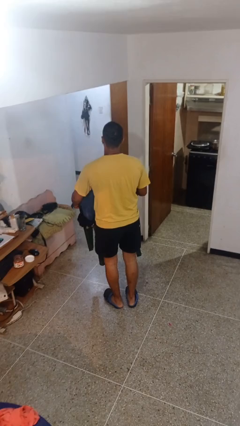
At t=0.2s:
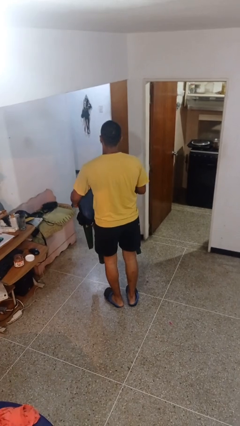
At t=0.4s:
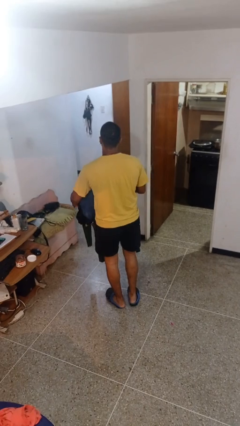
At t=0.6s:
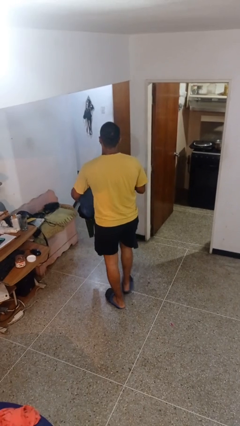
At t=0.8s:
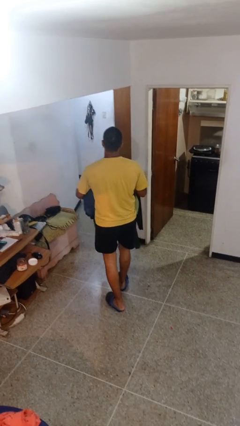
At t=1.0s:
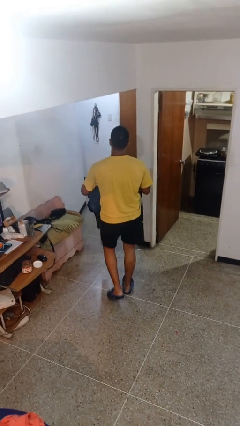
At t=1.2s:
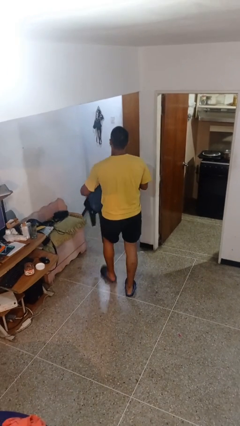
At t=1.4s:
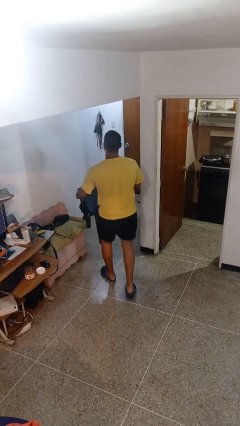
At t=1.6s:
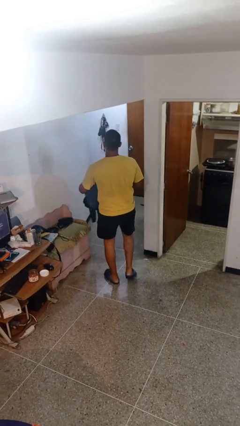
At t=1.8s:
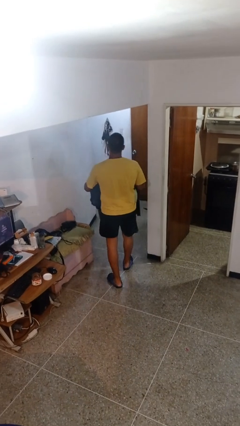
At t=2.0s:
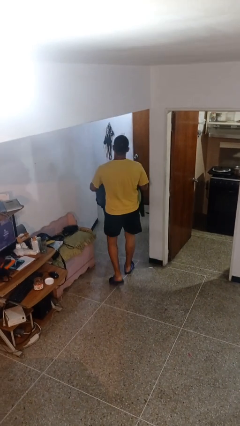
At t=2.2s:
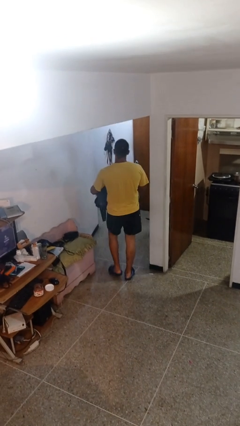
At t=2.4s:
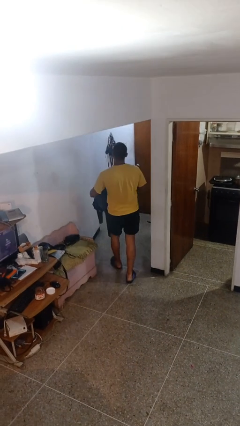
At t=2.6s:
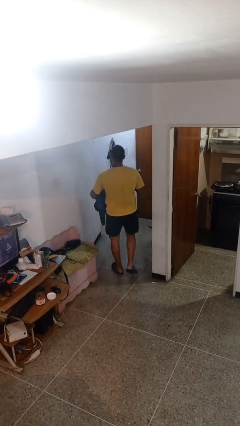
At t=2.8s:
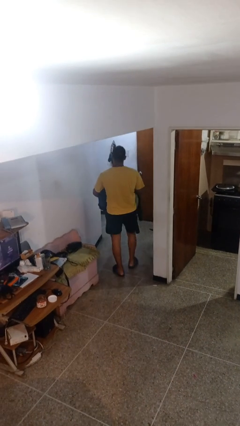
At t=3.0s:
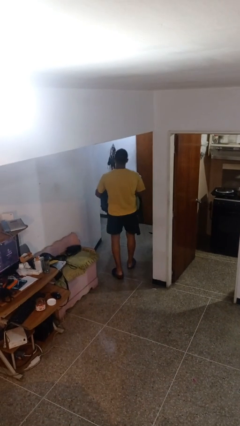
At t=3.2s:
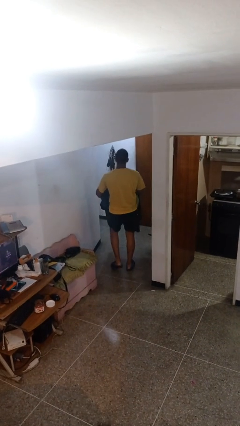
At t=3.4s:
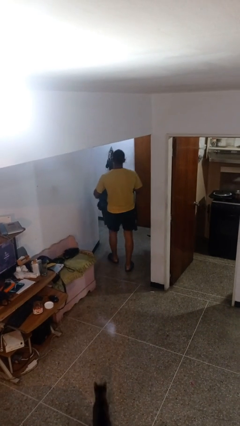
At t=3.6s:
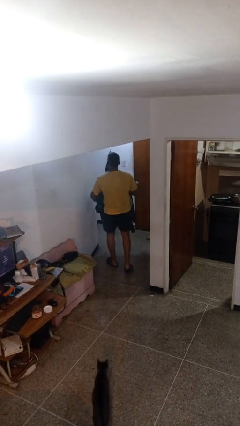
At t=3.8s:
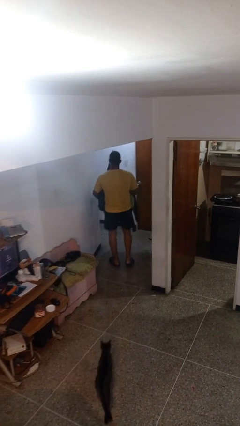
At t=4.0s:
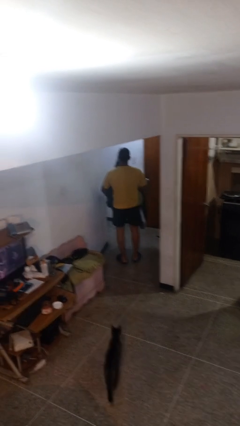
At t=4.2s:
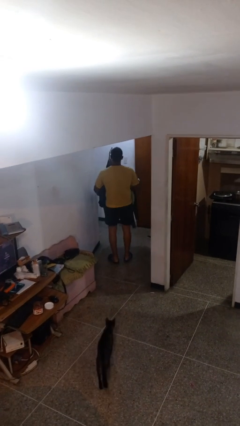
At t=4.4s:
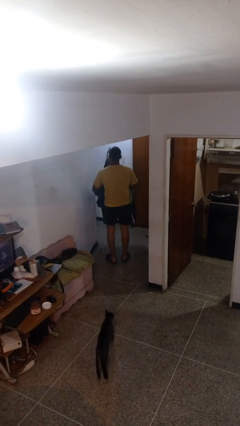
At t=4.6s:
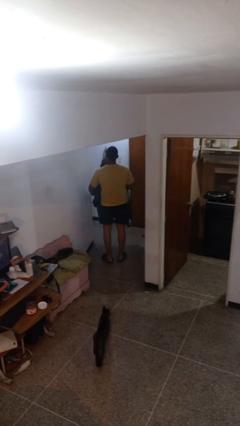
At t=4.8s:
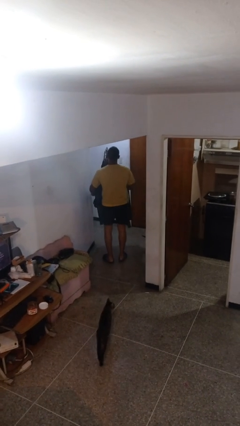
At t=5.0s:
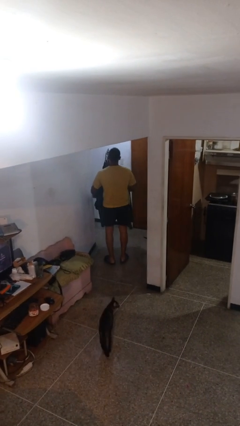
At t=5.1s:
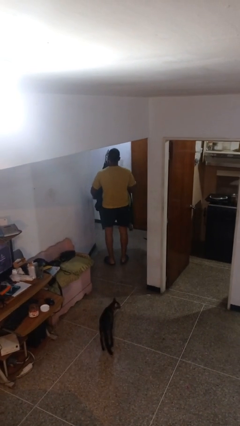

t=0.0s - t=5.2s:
person carries furniture

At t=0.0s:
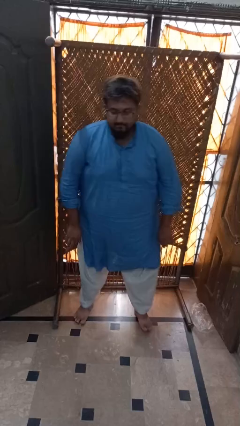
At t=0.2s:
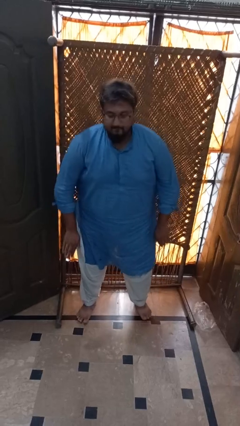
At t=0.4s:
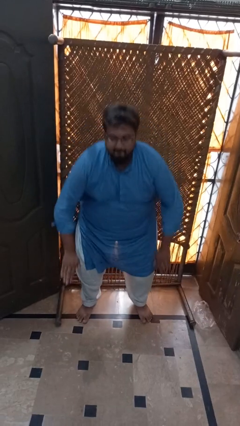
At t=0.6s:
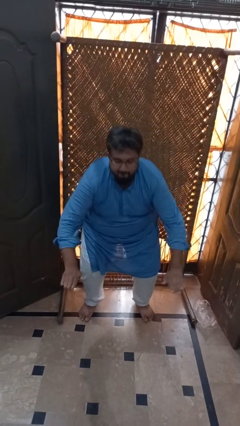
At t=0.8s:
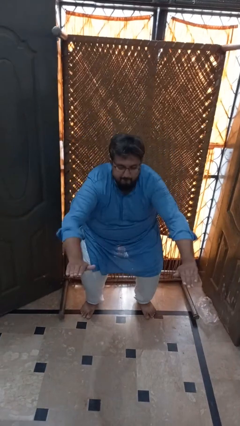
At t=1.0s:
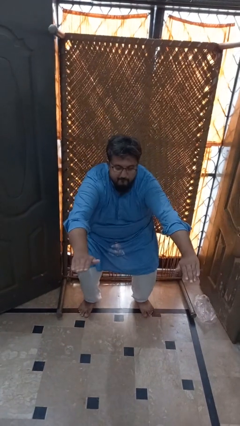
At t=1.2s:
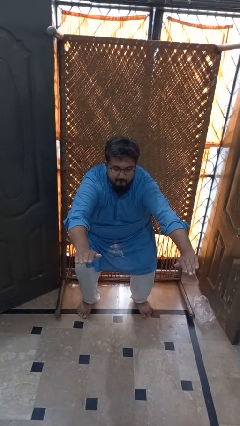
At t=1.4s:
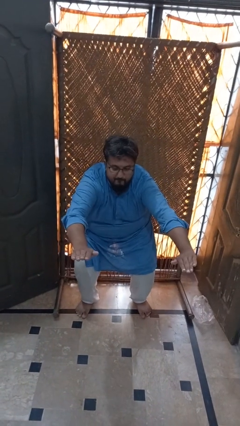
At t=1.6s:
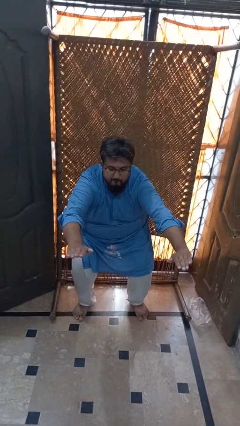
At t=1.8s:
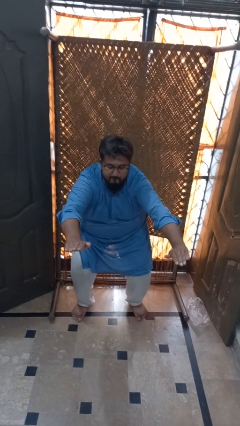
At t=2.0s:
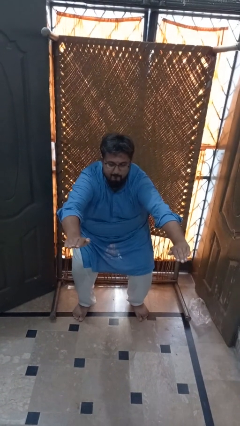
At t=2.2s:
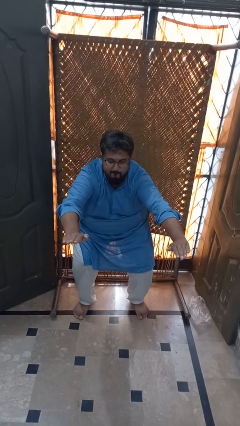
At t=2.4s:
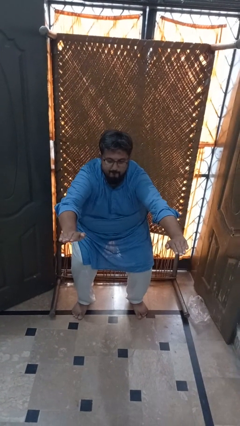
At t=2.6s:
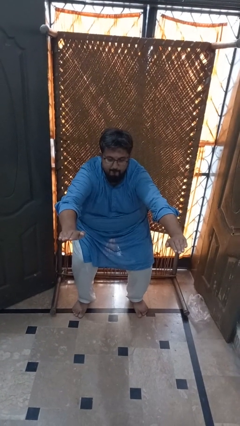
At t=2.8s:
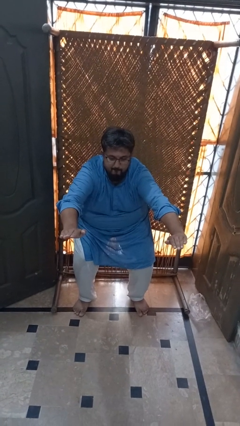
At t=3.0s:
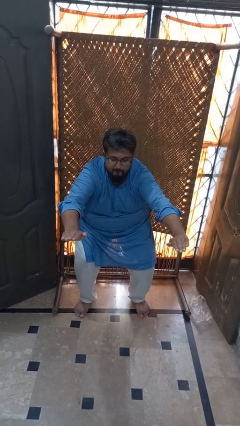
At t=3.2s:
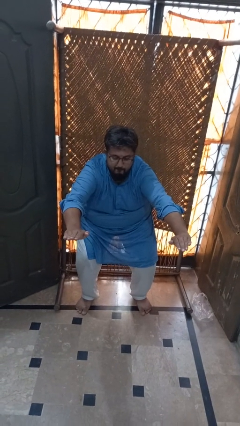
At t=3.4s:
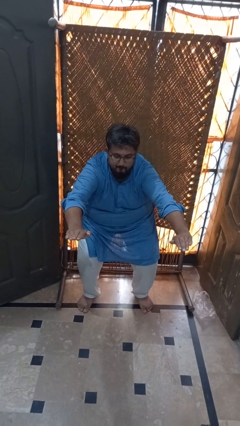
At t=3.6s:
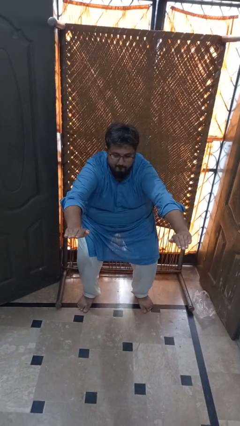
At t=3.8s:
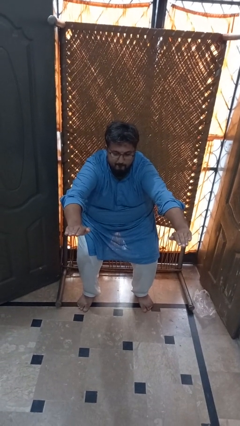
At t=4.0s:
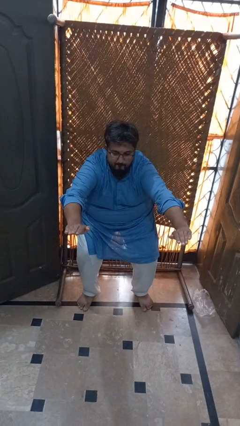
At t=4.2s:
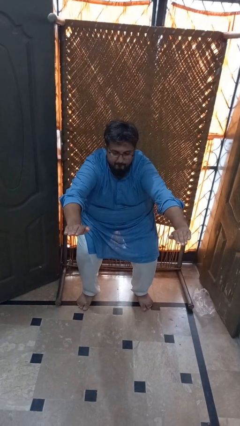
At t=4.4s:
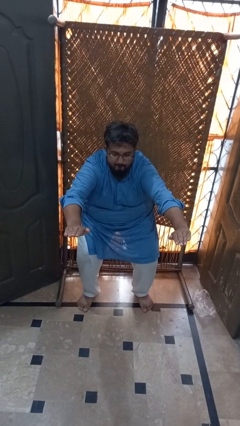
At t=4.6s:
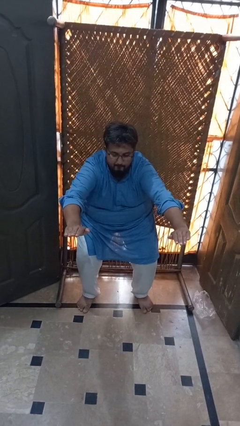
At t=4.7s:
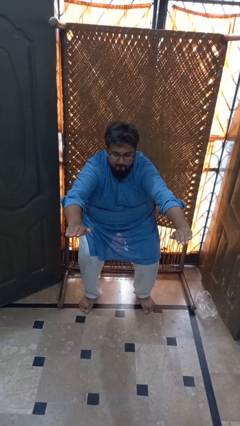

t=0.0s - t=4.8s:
person squats

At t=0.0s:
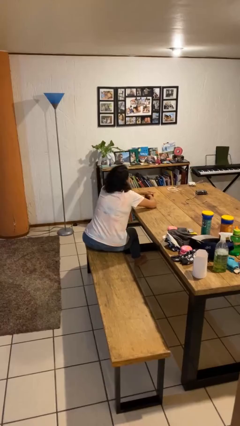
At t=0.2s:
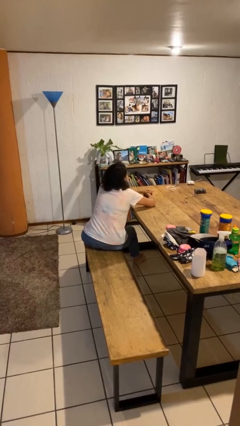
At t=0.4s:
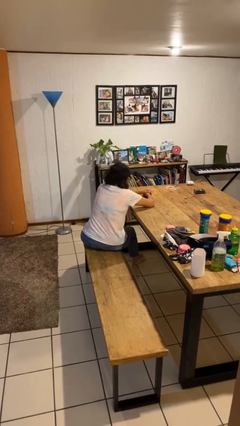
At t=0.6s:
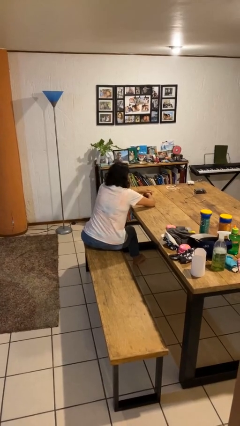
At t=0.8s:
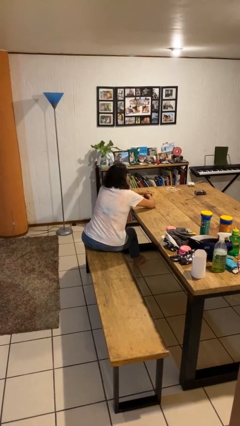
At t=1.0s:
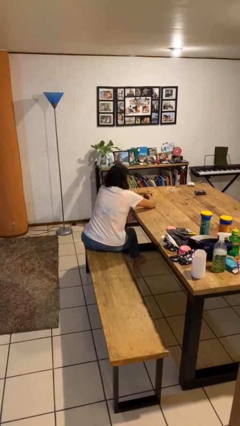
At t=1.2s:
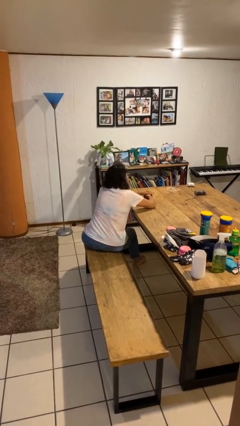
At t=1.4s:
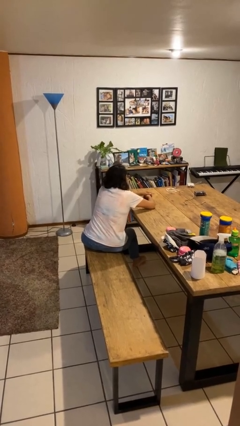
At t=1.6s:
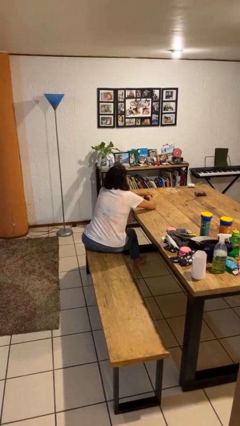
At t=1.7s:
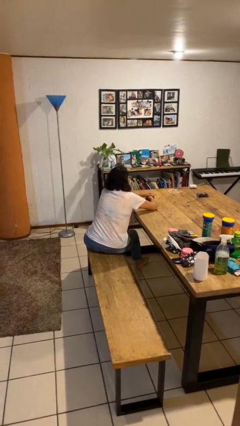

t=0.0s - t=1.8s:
person nods head

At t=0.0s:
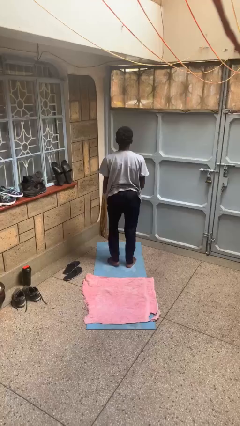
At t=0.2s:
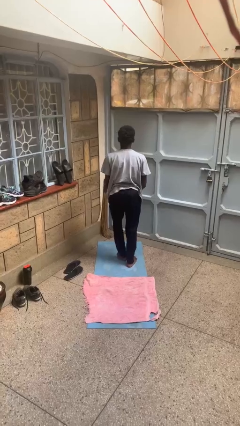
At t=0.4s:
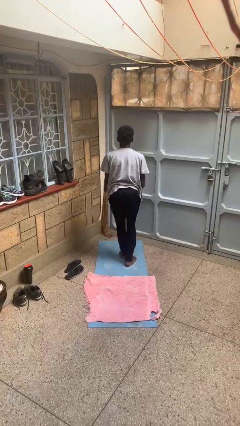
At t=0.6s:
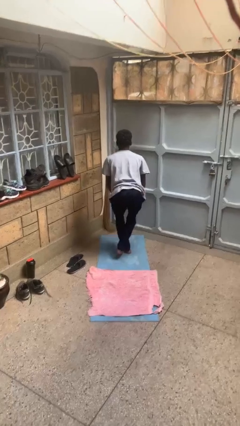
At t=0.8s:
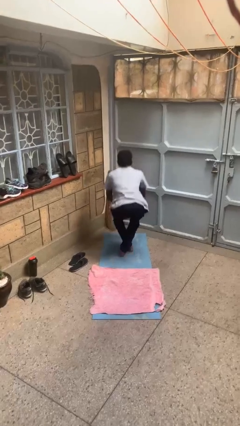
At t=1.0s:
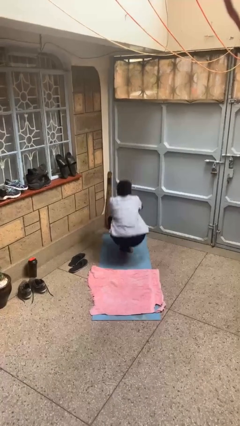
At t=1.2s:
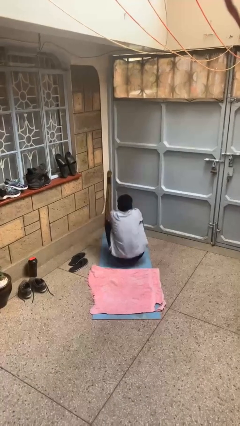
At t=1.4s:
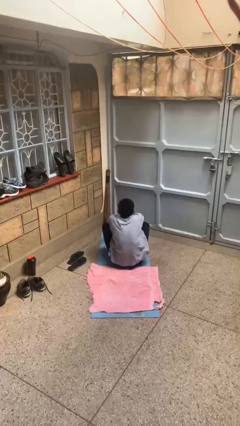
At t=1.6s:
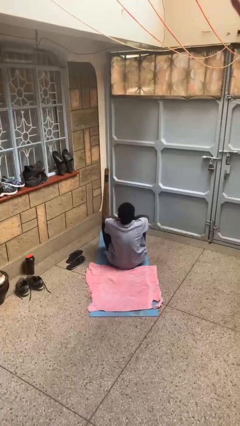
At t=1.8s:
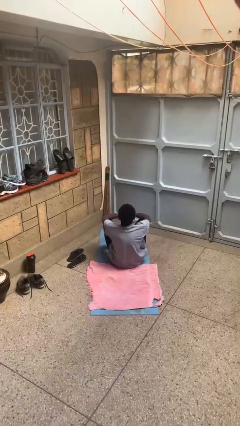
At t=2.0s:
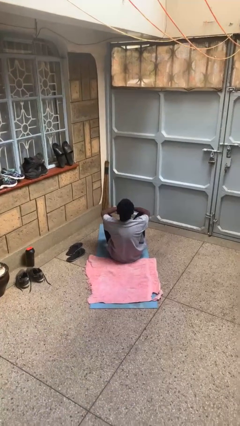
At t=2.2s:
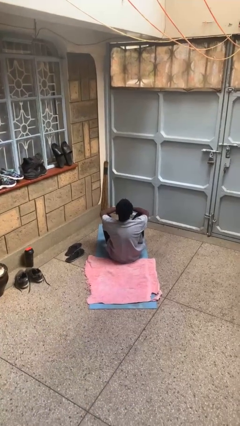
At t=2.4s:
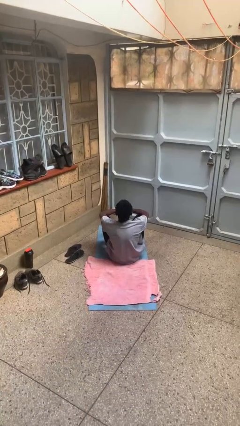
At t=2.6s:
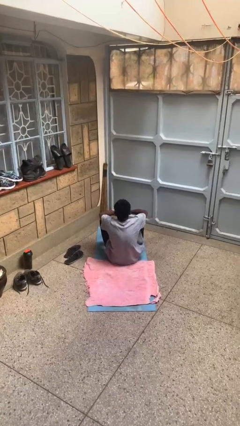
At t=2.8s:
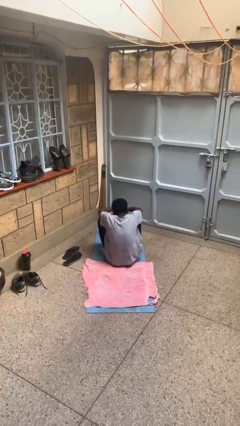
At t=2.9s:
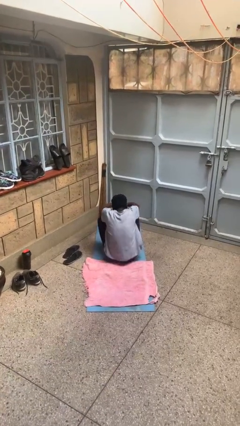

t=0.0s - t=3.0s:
person sits crisscross

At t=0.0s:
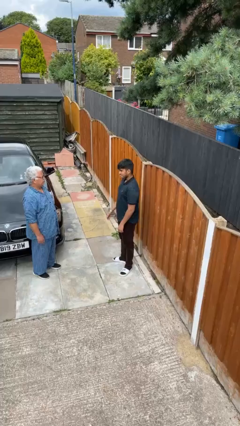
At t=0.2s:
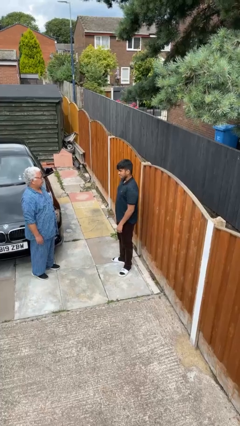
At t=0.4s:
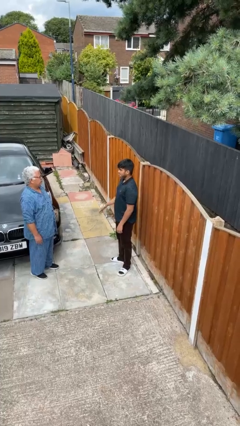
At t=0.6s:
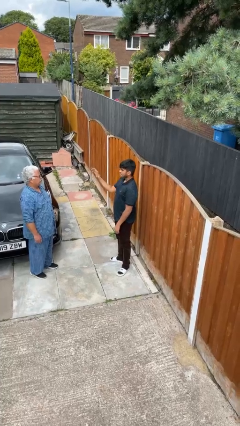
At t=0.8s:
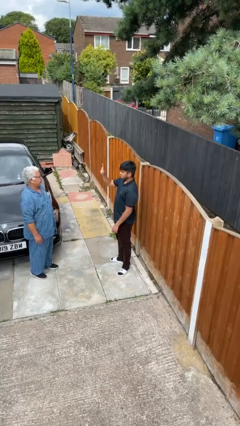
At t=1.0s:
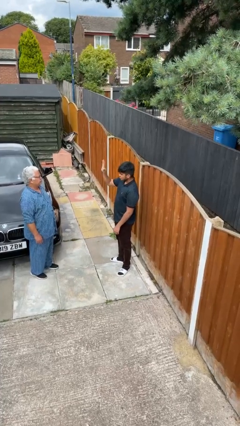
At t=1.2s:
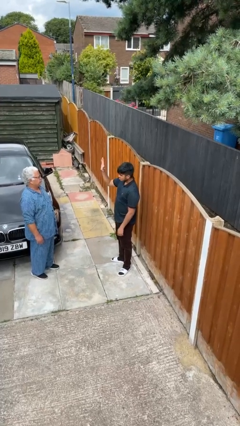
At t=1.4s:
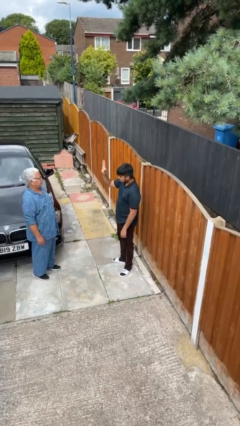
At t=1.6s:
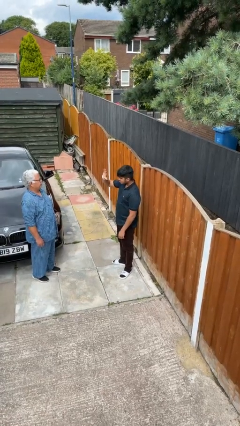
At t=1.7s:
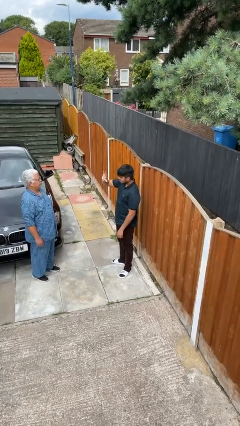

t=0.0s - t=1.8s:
person waves at person

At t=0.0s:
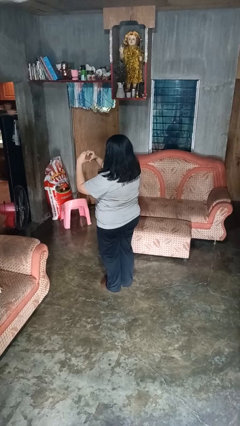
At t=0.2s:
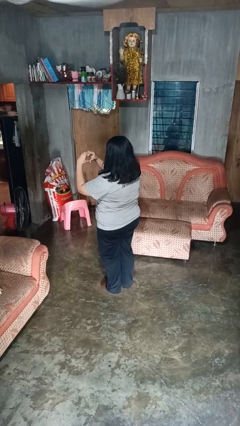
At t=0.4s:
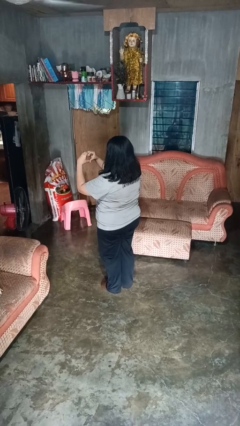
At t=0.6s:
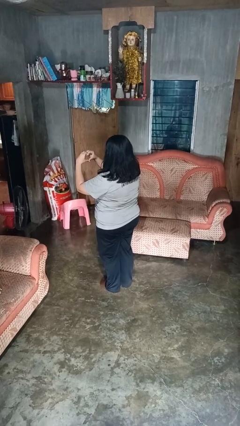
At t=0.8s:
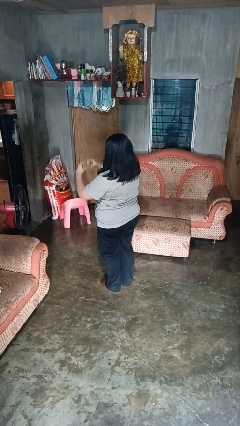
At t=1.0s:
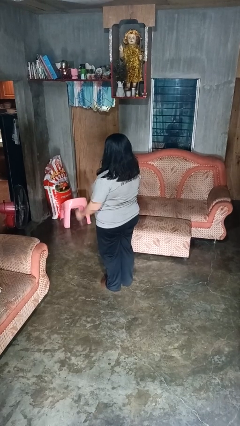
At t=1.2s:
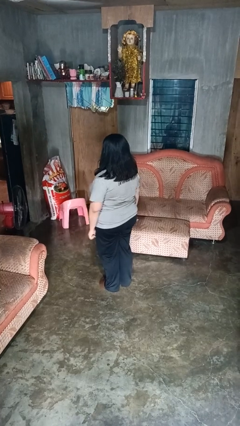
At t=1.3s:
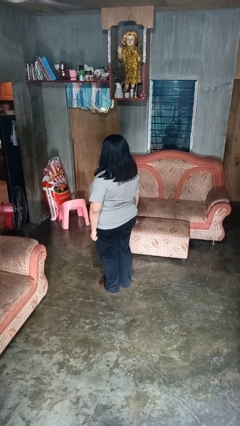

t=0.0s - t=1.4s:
person gestures heart
